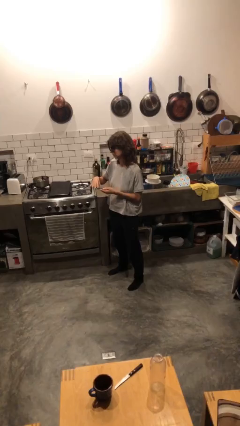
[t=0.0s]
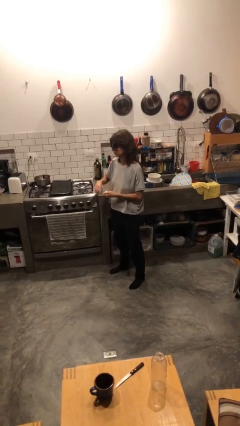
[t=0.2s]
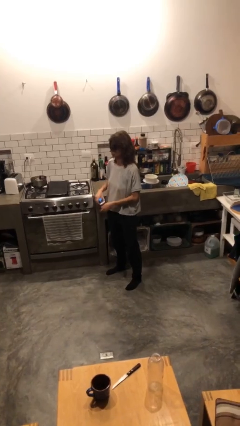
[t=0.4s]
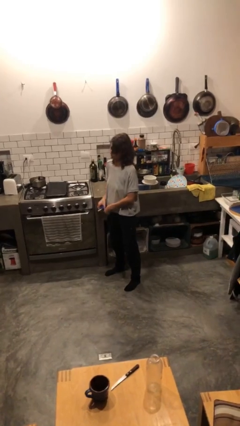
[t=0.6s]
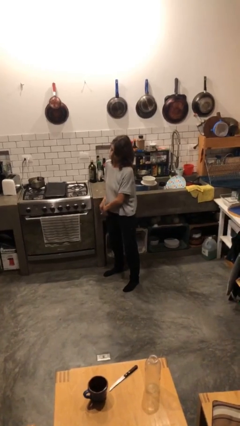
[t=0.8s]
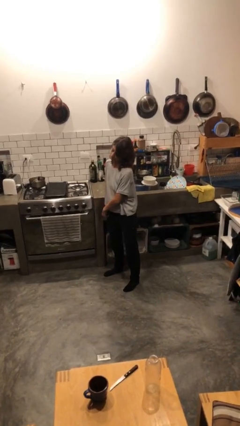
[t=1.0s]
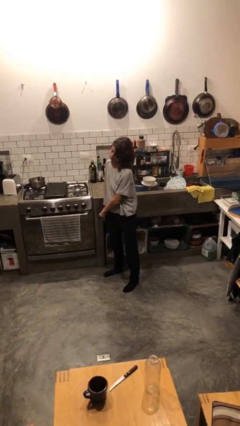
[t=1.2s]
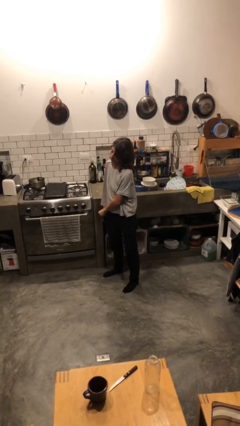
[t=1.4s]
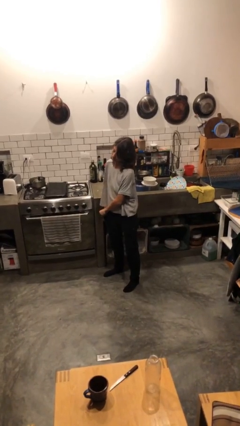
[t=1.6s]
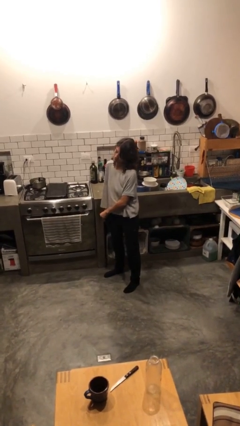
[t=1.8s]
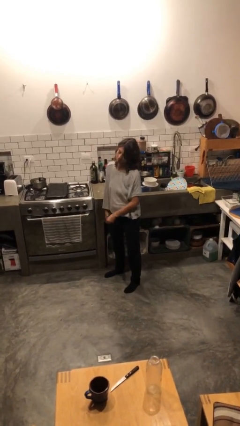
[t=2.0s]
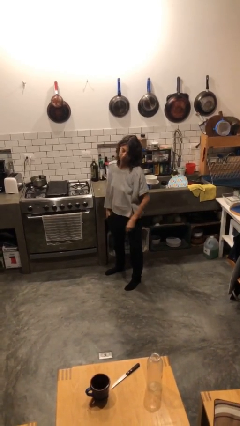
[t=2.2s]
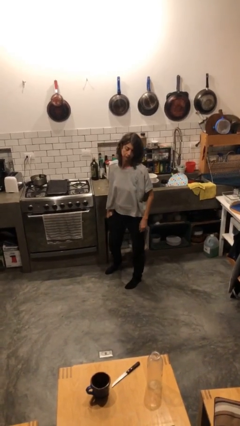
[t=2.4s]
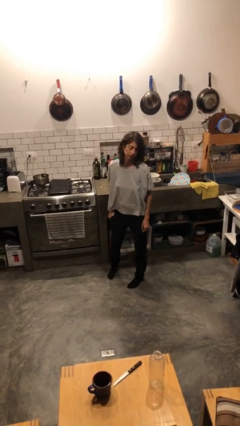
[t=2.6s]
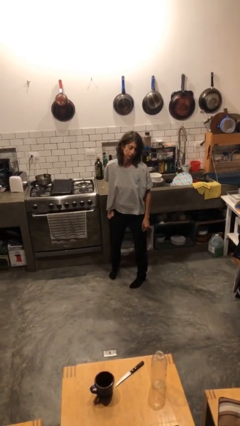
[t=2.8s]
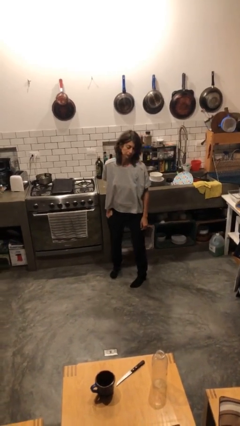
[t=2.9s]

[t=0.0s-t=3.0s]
person puts phone into pocket

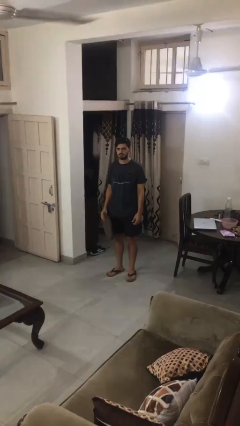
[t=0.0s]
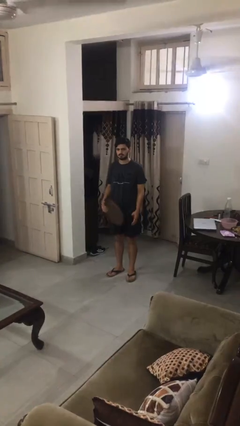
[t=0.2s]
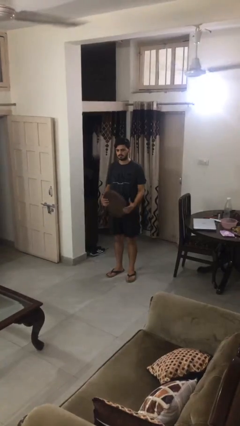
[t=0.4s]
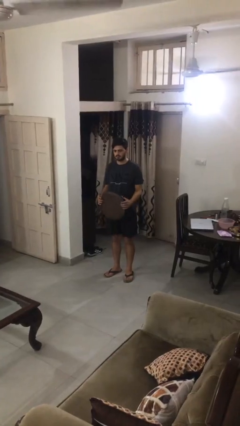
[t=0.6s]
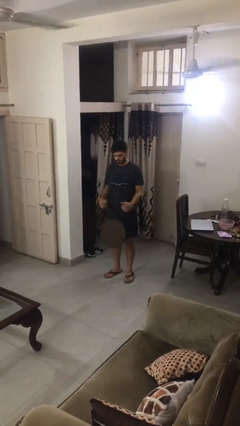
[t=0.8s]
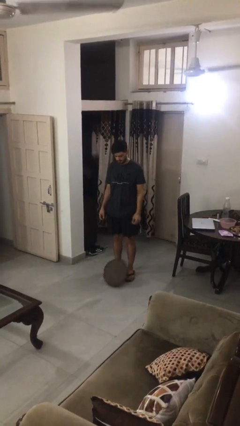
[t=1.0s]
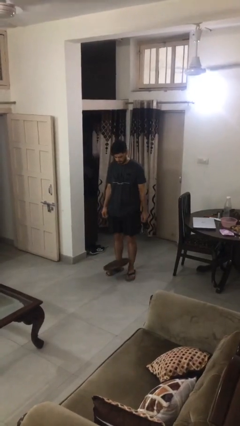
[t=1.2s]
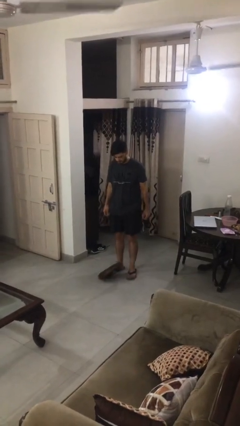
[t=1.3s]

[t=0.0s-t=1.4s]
person drops object

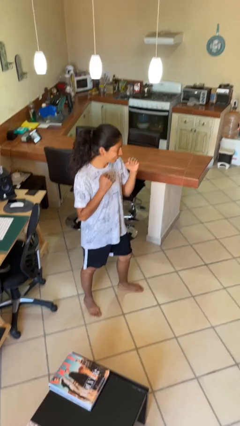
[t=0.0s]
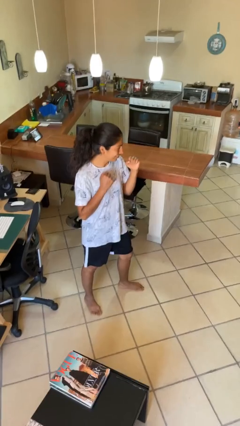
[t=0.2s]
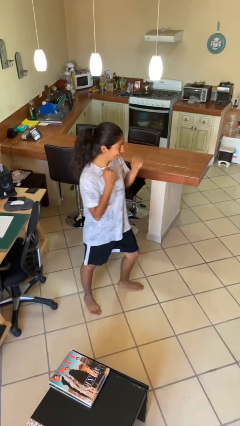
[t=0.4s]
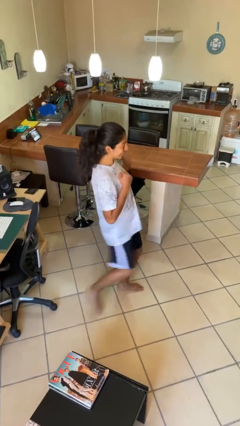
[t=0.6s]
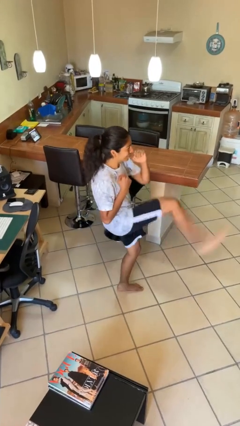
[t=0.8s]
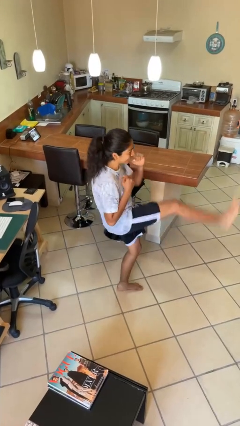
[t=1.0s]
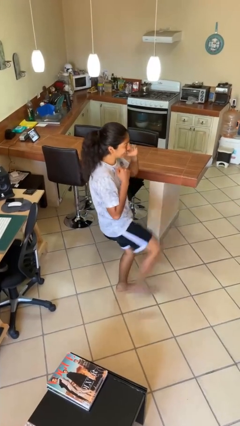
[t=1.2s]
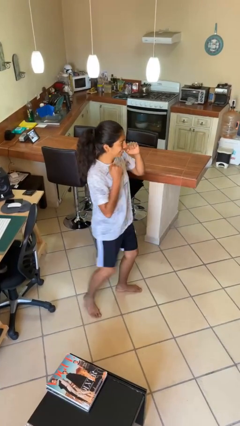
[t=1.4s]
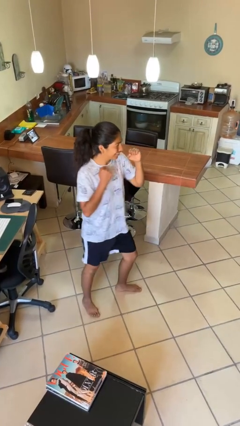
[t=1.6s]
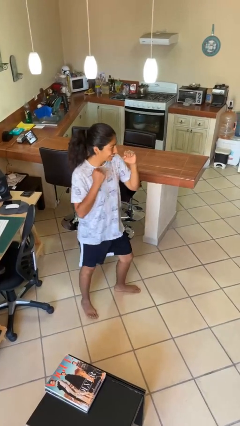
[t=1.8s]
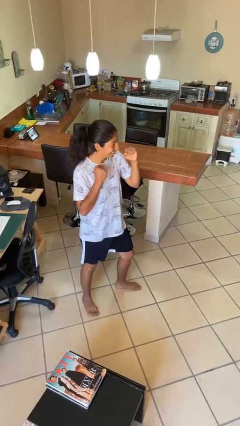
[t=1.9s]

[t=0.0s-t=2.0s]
person karate kicks

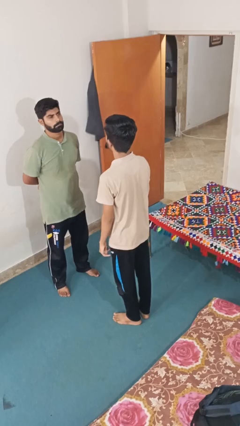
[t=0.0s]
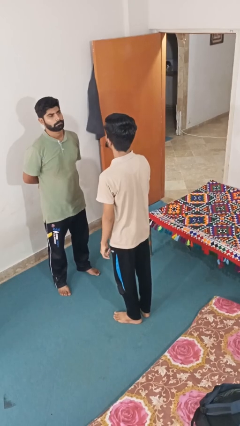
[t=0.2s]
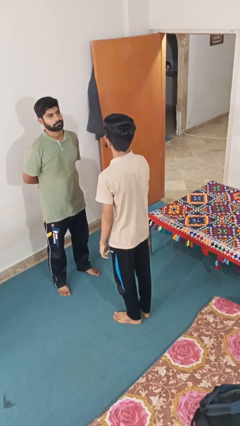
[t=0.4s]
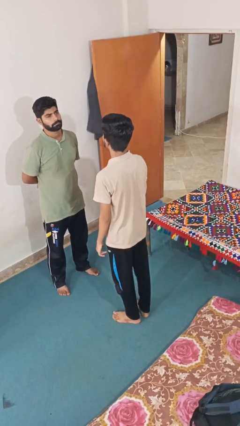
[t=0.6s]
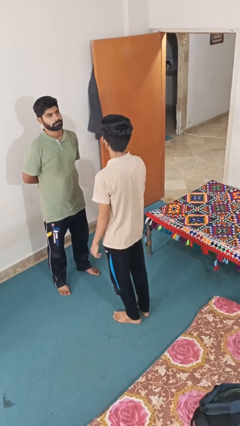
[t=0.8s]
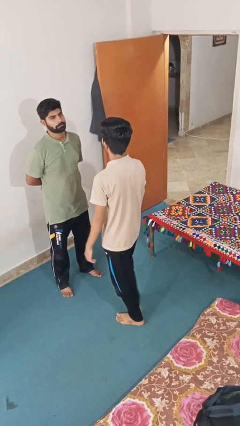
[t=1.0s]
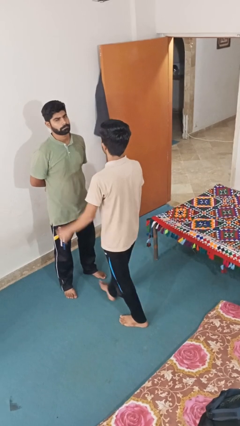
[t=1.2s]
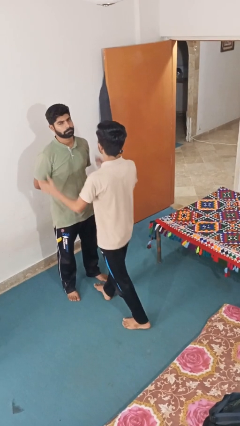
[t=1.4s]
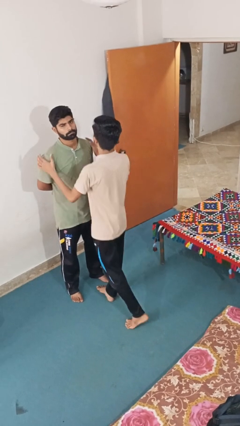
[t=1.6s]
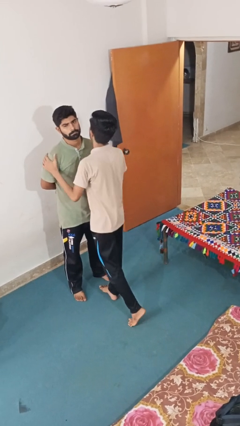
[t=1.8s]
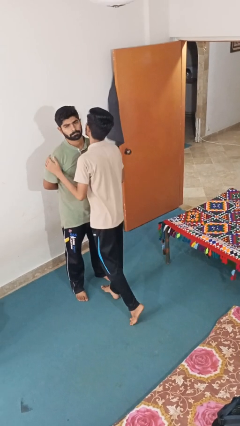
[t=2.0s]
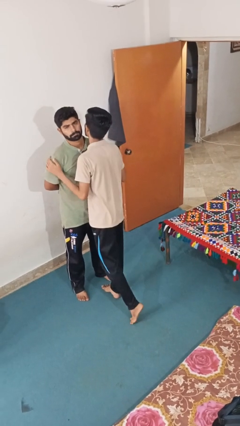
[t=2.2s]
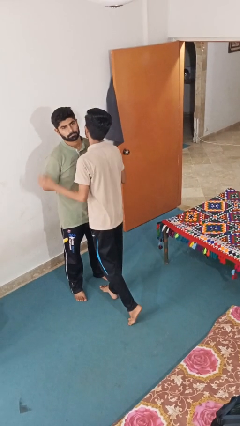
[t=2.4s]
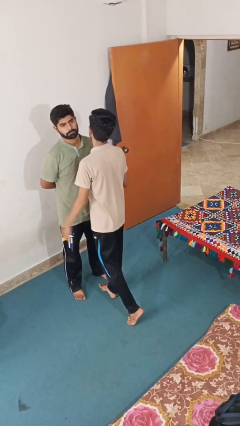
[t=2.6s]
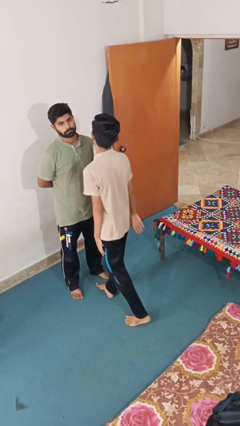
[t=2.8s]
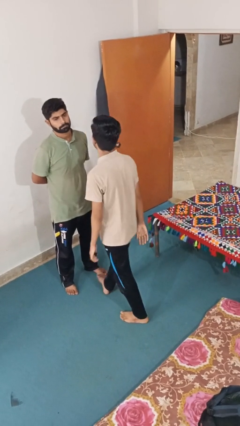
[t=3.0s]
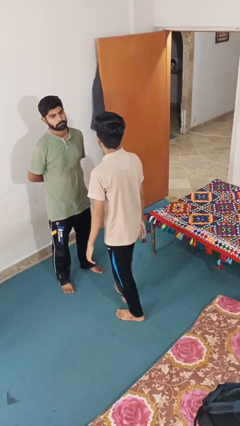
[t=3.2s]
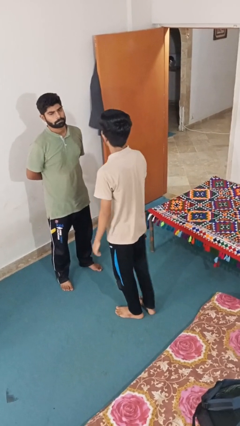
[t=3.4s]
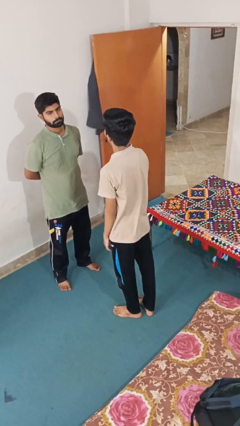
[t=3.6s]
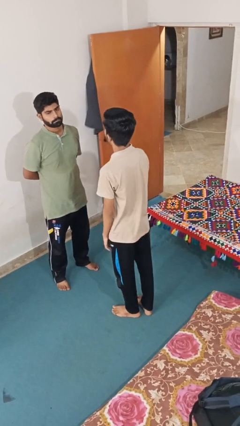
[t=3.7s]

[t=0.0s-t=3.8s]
person kisses cheek of person

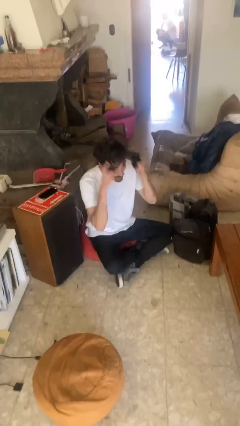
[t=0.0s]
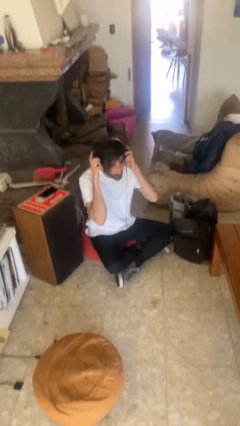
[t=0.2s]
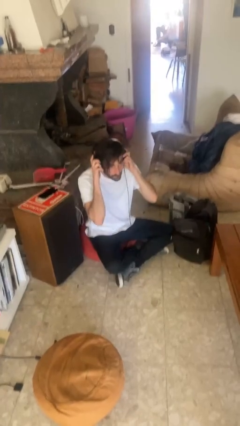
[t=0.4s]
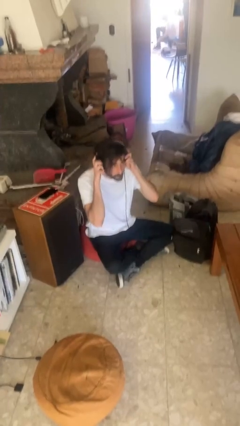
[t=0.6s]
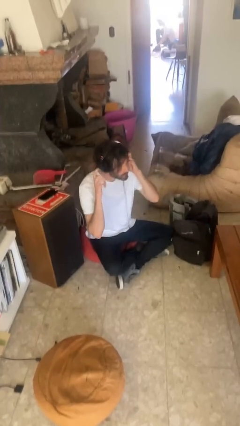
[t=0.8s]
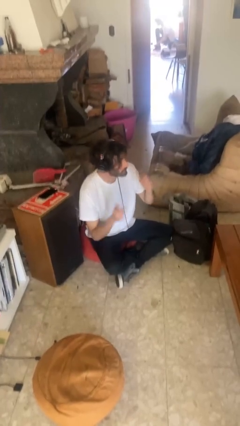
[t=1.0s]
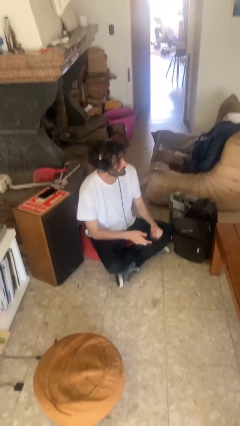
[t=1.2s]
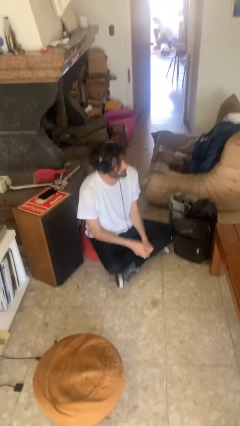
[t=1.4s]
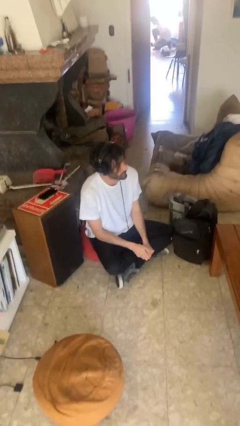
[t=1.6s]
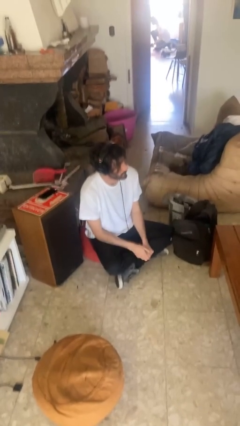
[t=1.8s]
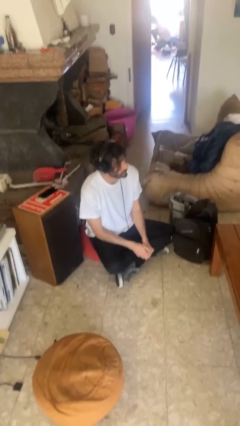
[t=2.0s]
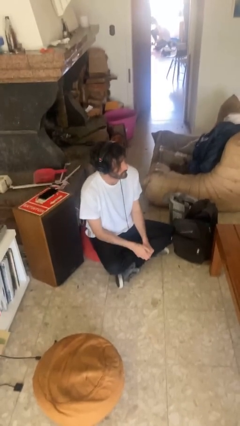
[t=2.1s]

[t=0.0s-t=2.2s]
person puts on headphones

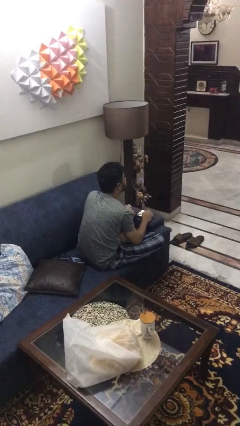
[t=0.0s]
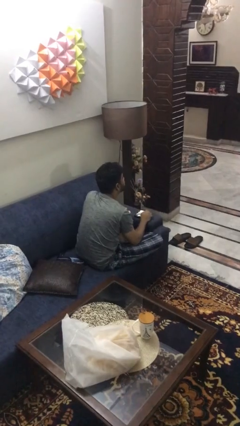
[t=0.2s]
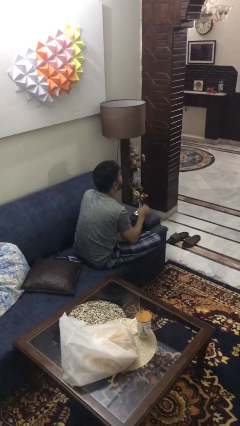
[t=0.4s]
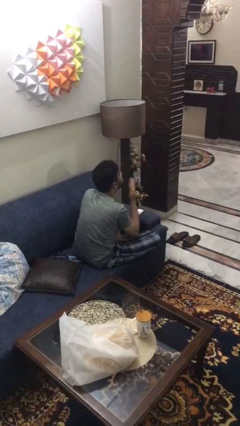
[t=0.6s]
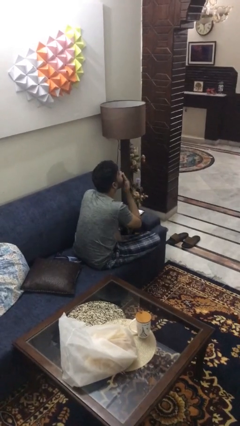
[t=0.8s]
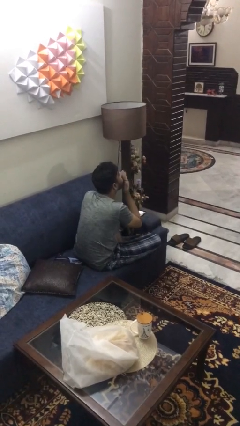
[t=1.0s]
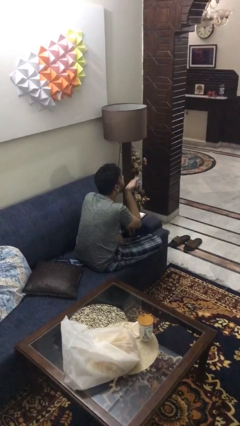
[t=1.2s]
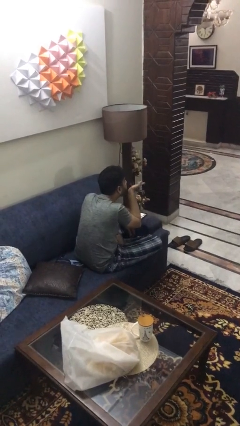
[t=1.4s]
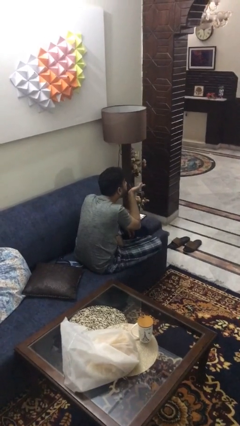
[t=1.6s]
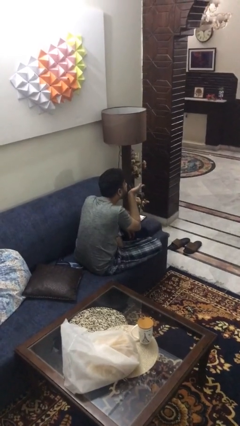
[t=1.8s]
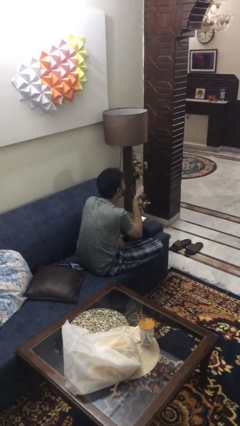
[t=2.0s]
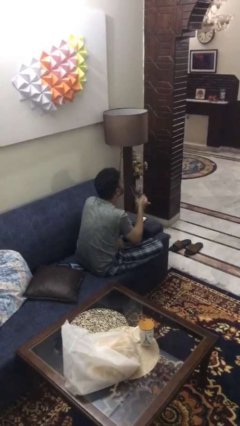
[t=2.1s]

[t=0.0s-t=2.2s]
person gestures blow kiss

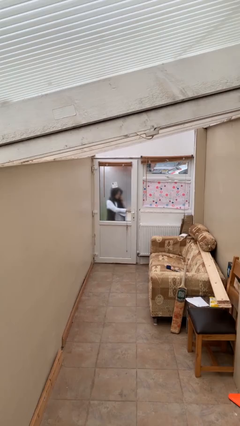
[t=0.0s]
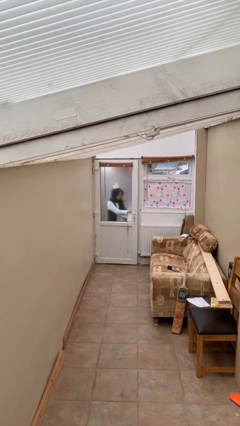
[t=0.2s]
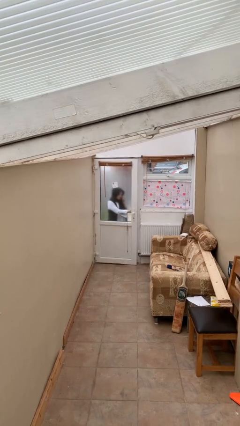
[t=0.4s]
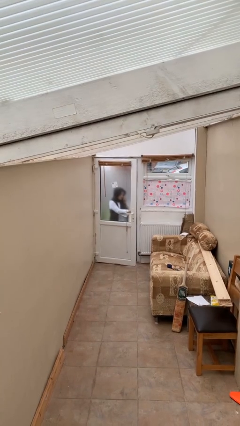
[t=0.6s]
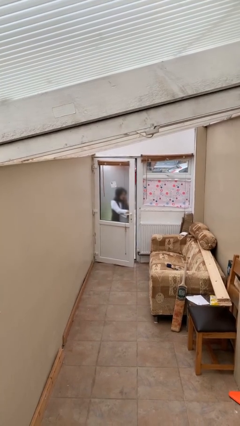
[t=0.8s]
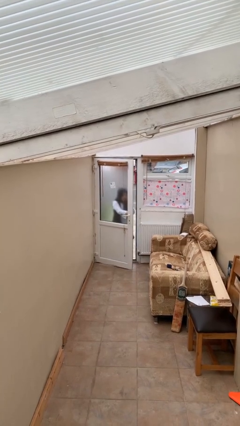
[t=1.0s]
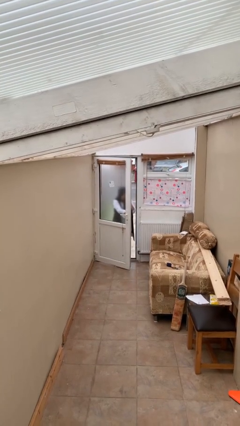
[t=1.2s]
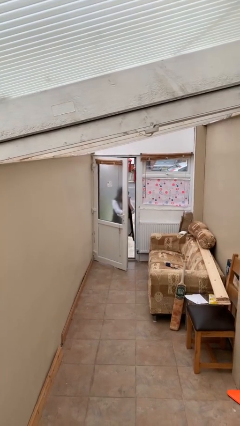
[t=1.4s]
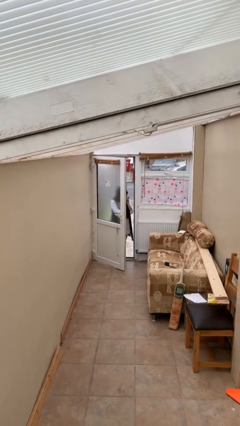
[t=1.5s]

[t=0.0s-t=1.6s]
person opens facility door

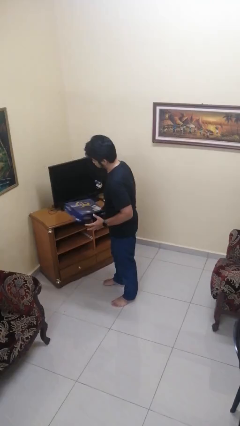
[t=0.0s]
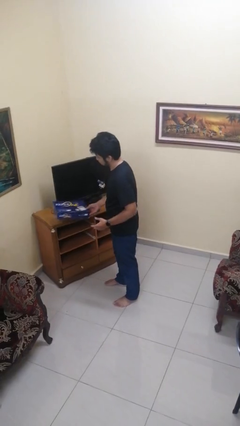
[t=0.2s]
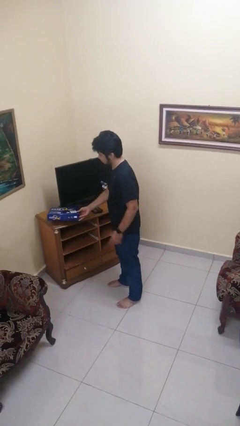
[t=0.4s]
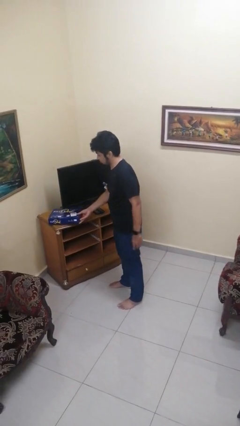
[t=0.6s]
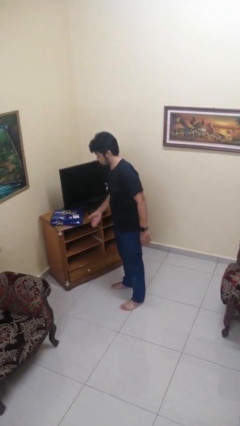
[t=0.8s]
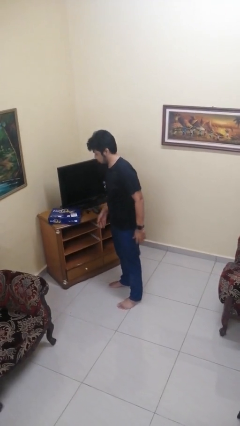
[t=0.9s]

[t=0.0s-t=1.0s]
person puts down object on countertop
